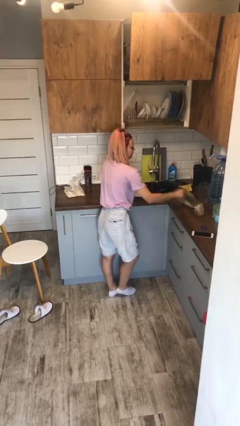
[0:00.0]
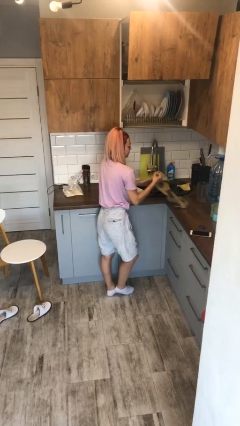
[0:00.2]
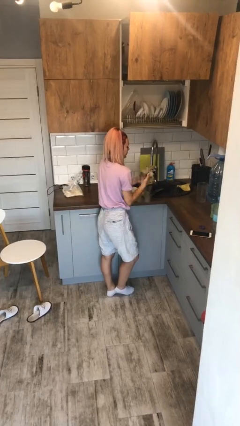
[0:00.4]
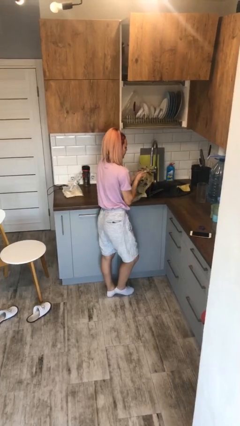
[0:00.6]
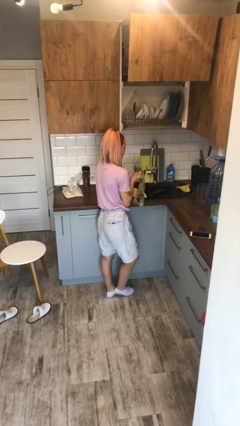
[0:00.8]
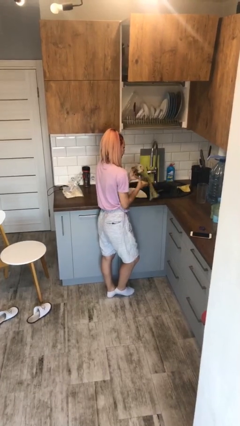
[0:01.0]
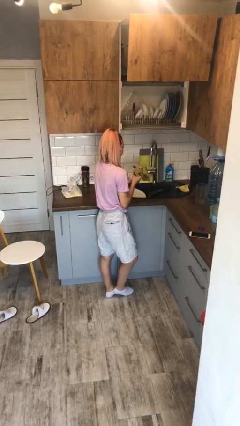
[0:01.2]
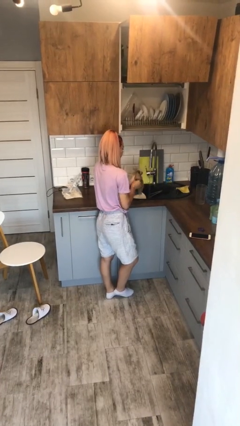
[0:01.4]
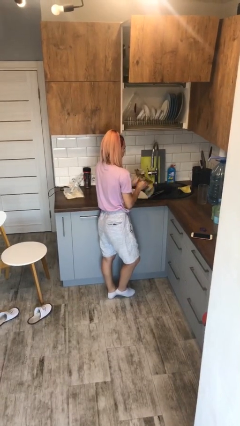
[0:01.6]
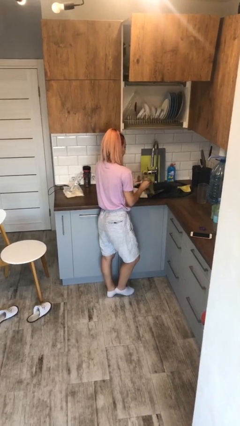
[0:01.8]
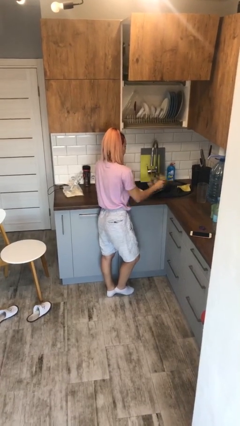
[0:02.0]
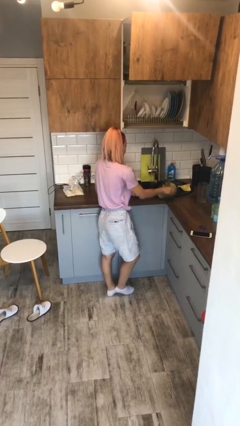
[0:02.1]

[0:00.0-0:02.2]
person dries hands with towel

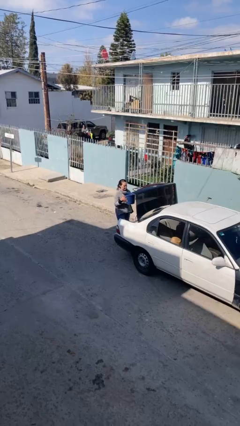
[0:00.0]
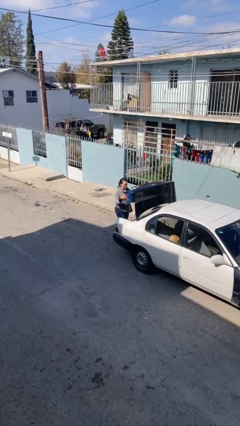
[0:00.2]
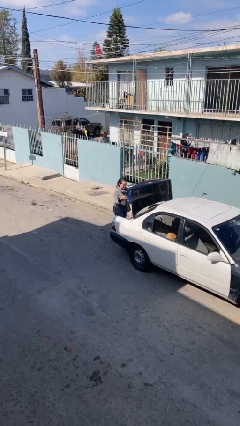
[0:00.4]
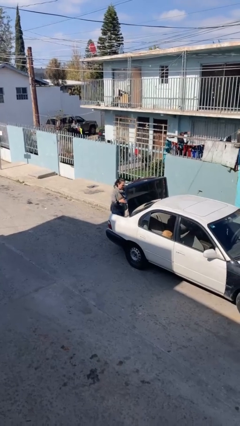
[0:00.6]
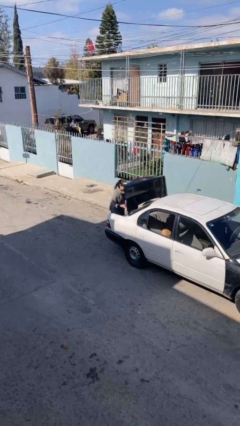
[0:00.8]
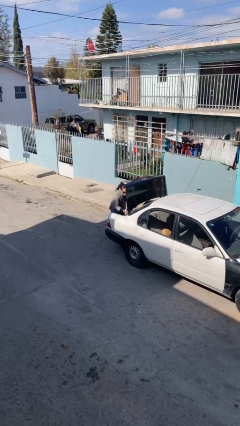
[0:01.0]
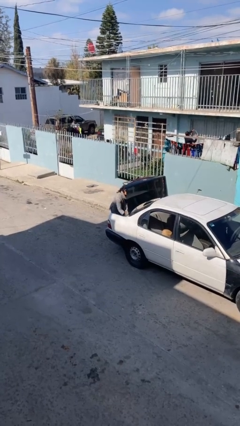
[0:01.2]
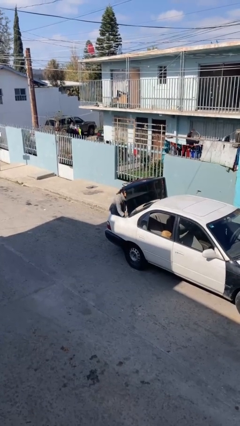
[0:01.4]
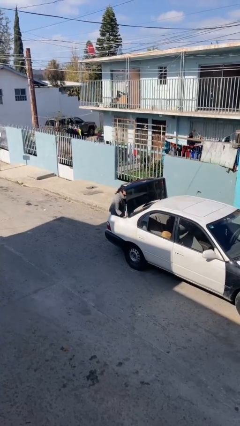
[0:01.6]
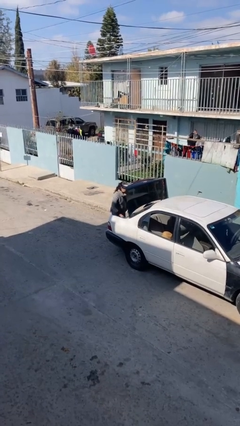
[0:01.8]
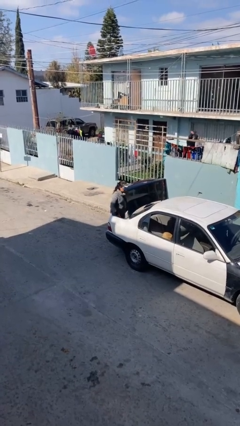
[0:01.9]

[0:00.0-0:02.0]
person loads car

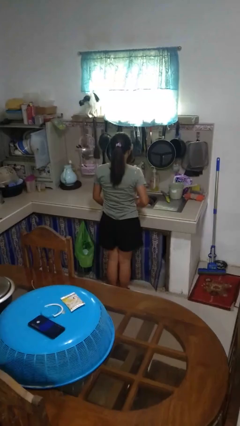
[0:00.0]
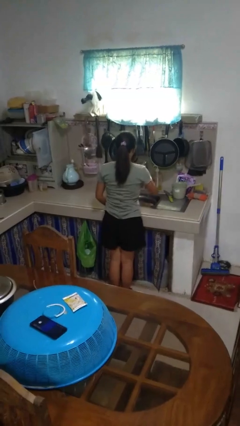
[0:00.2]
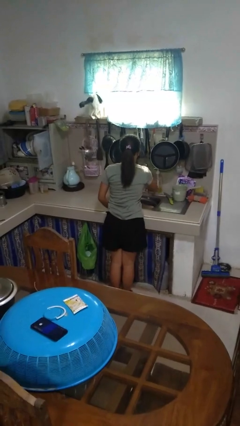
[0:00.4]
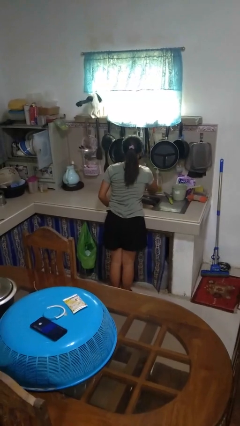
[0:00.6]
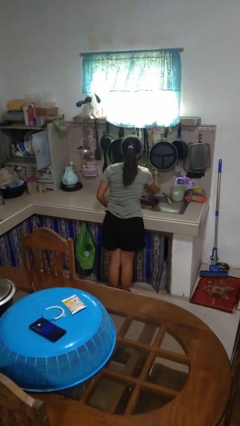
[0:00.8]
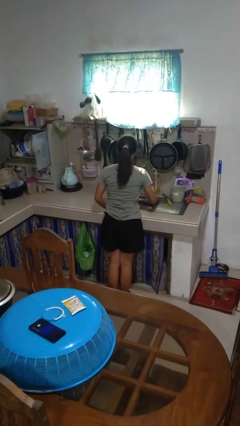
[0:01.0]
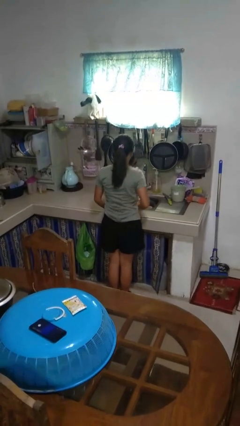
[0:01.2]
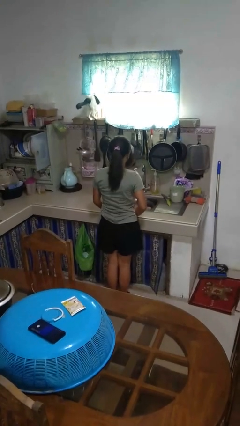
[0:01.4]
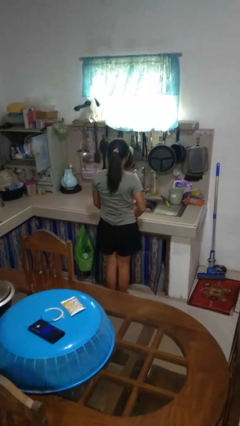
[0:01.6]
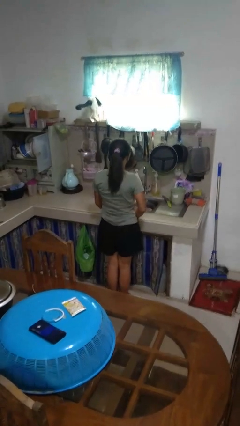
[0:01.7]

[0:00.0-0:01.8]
person turns off faucet

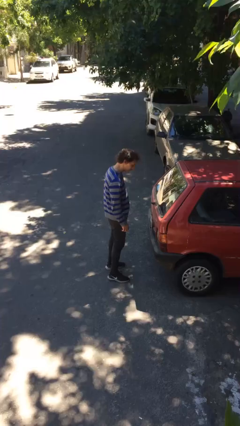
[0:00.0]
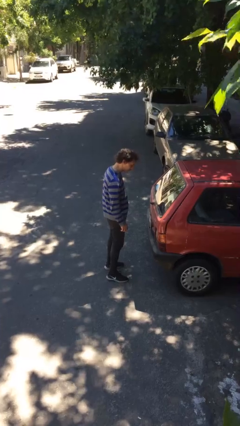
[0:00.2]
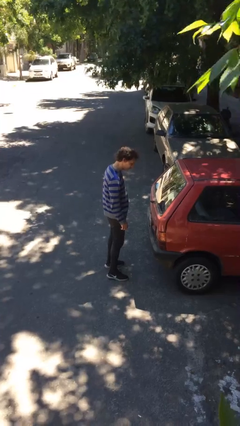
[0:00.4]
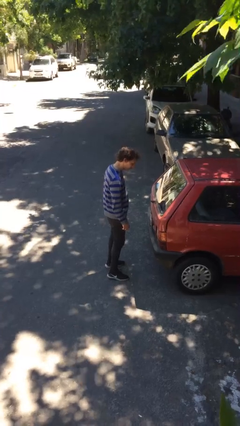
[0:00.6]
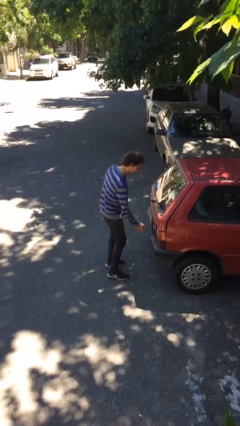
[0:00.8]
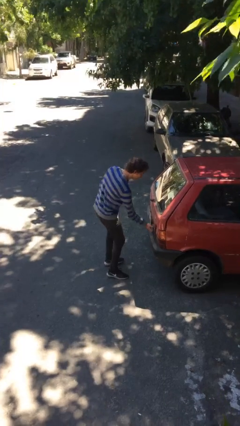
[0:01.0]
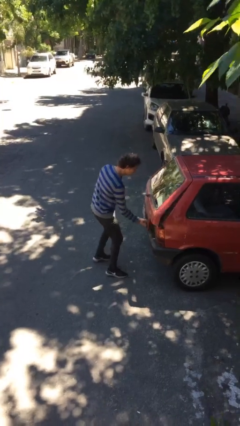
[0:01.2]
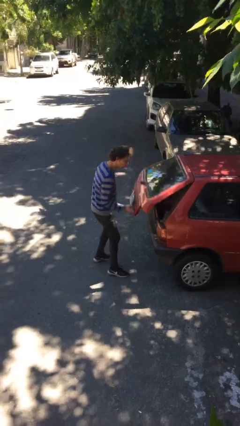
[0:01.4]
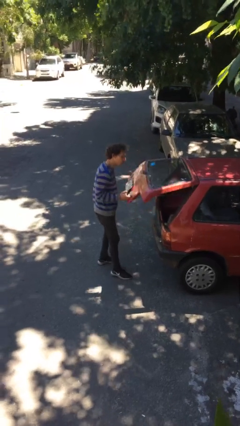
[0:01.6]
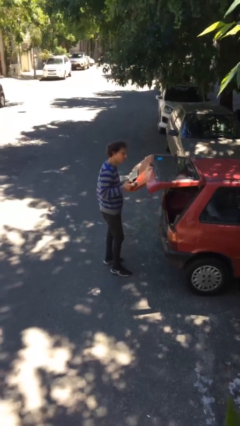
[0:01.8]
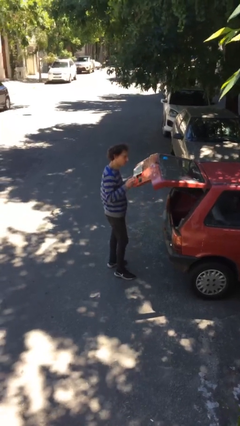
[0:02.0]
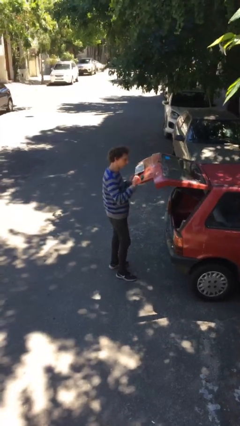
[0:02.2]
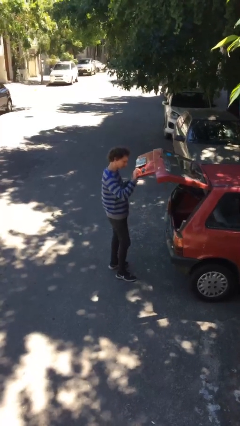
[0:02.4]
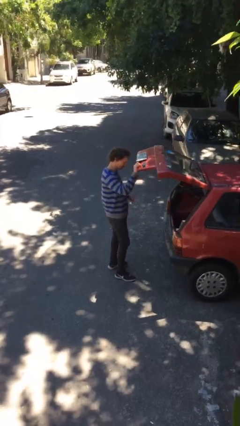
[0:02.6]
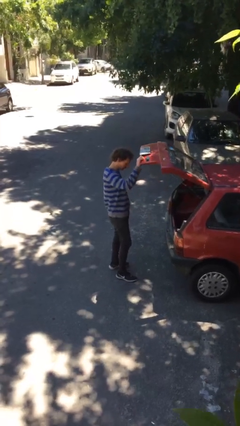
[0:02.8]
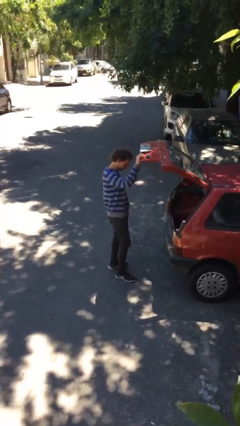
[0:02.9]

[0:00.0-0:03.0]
person opens car trunk

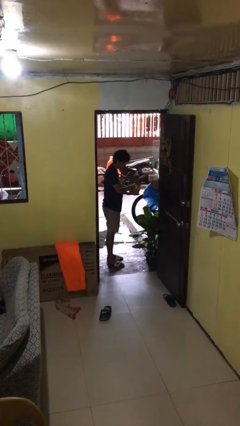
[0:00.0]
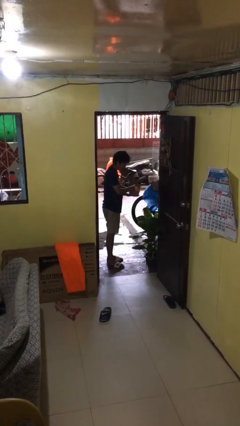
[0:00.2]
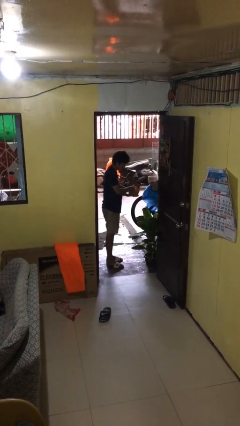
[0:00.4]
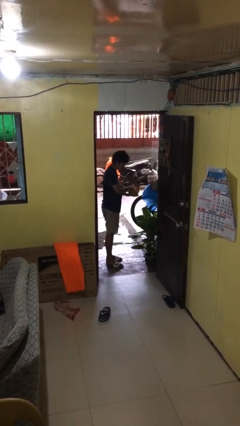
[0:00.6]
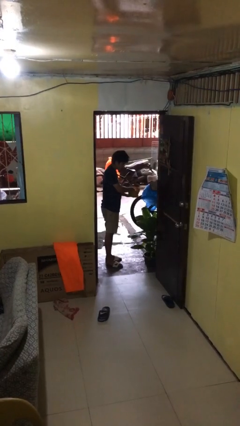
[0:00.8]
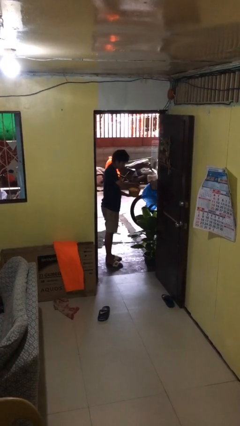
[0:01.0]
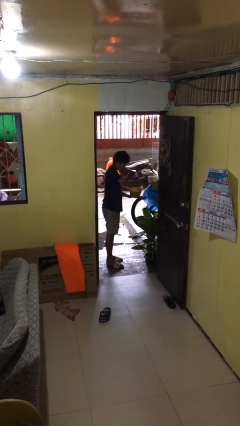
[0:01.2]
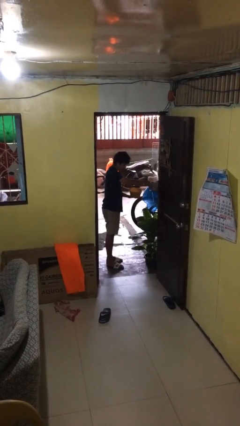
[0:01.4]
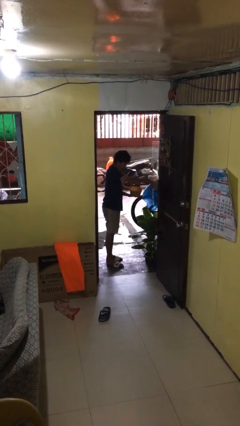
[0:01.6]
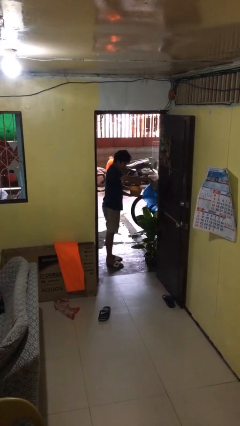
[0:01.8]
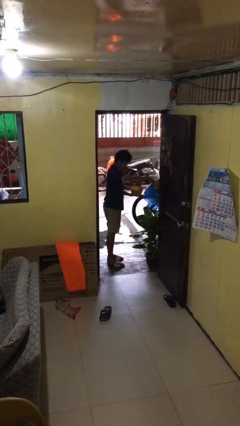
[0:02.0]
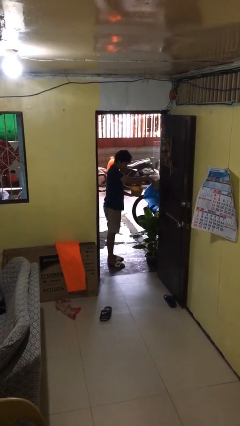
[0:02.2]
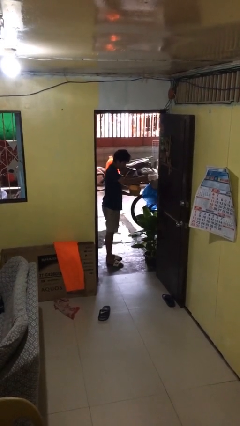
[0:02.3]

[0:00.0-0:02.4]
person waters houseplant

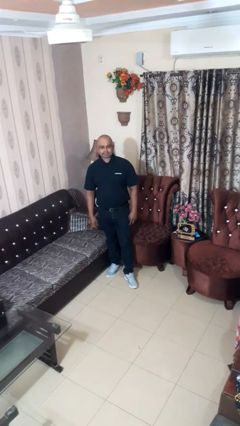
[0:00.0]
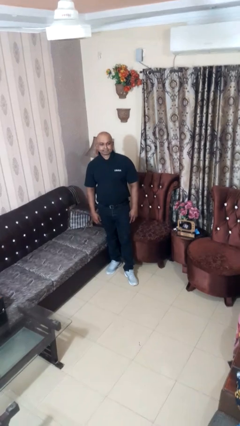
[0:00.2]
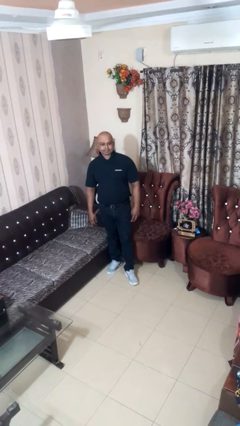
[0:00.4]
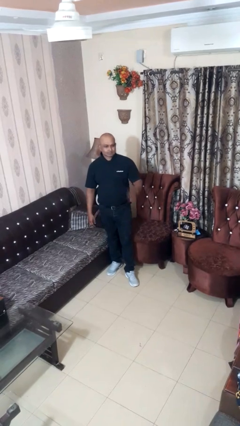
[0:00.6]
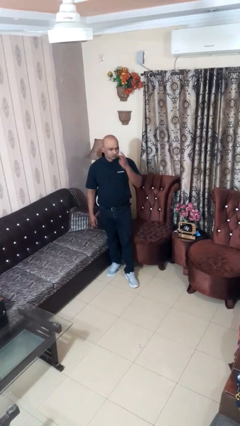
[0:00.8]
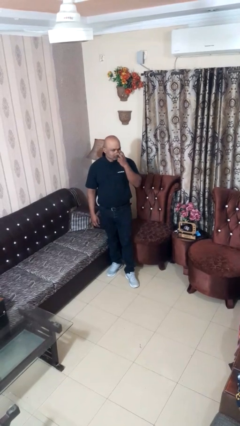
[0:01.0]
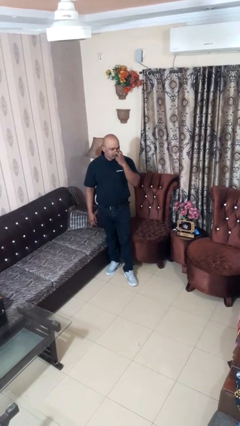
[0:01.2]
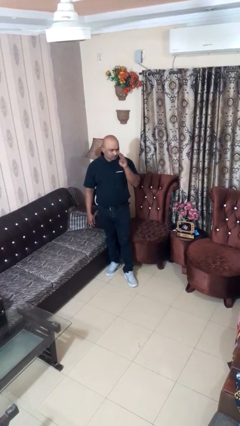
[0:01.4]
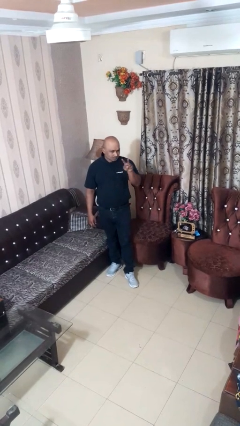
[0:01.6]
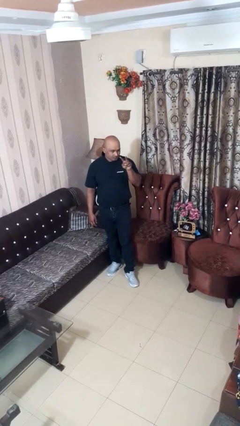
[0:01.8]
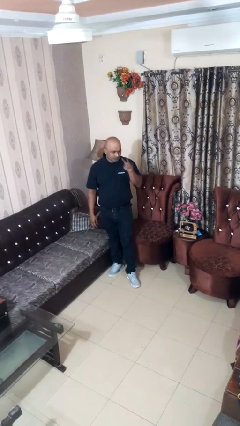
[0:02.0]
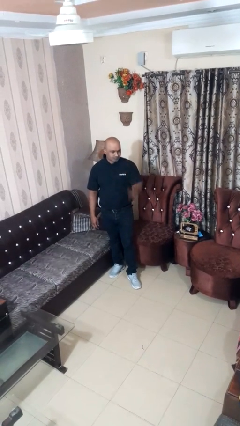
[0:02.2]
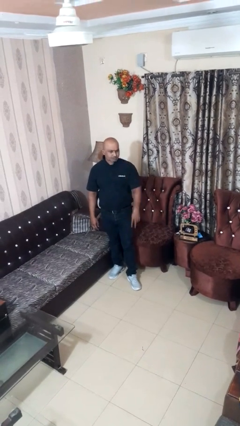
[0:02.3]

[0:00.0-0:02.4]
person gestures watch closely

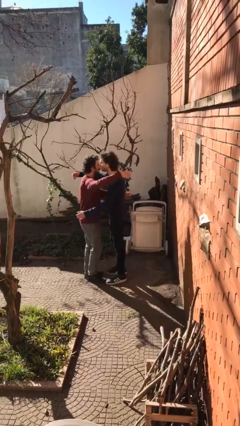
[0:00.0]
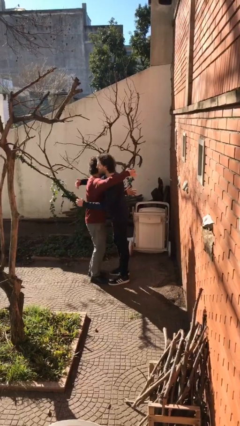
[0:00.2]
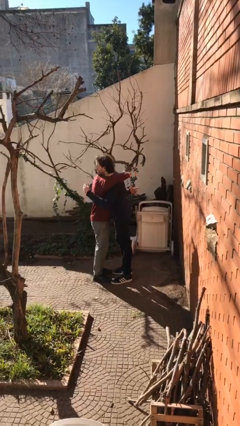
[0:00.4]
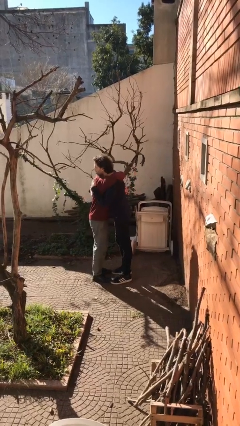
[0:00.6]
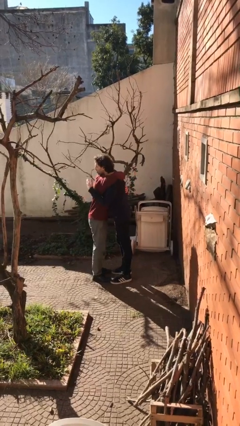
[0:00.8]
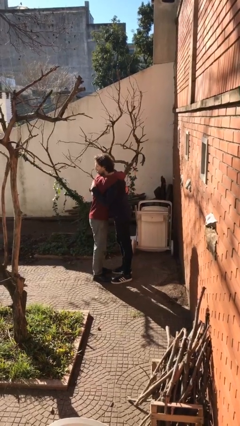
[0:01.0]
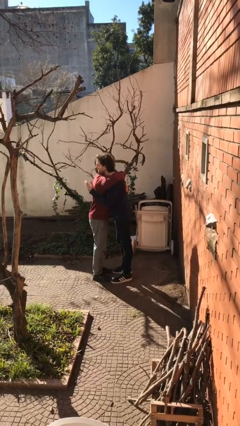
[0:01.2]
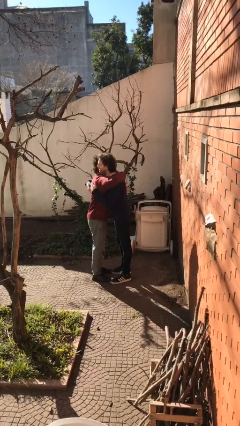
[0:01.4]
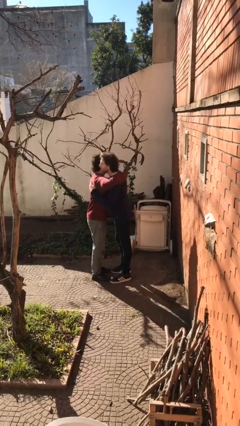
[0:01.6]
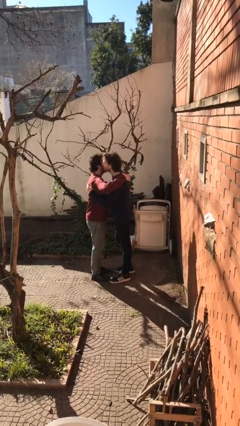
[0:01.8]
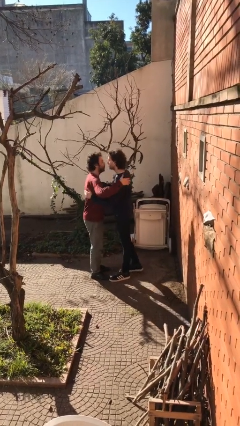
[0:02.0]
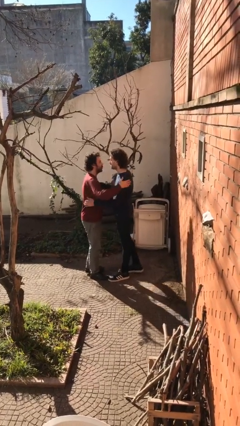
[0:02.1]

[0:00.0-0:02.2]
person embraces person

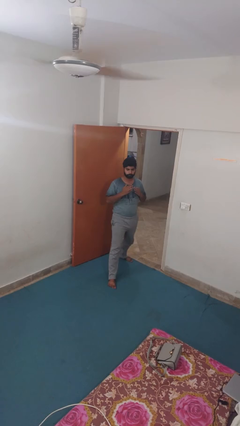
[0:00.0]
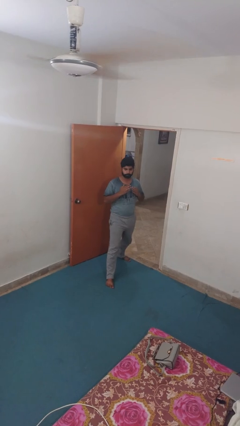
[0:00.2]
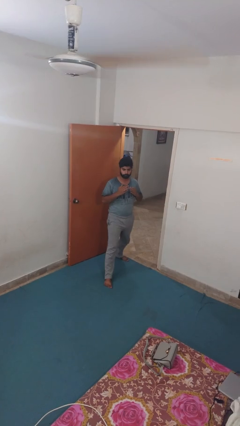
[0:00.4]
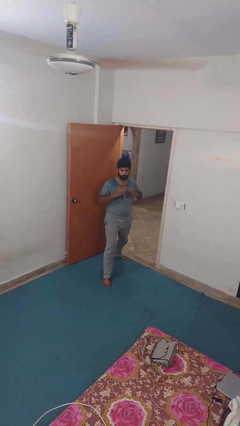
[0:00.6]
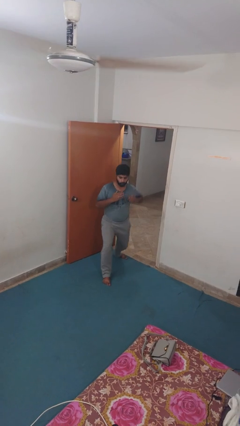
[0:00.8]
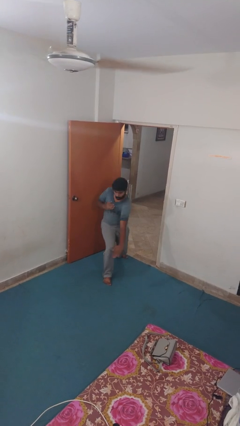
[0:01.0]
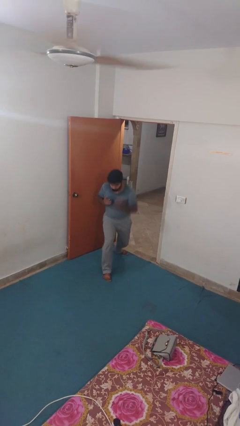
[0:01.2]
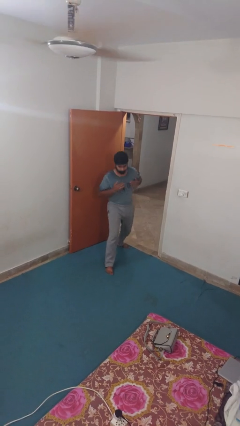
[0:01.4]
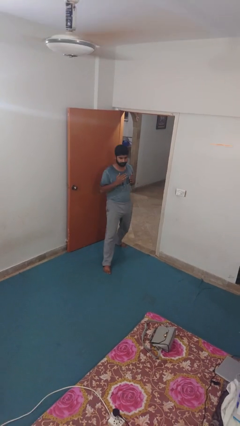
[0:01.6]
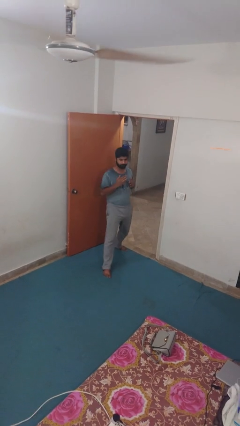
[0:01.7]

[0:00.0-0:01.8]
person karate chop
